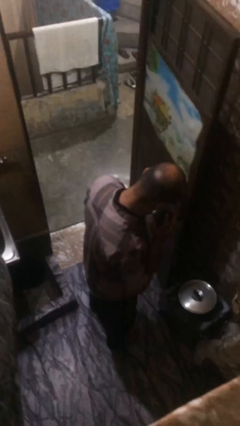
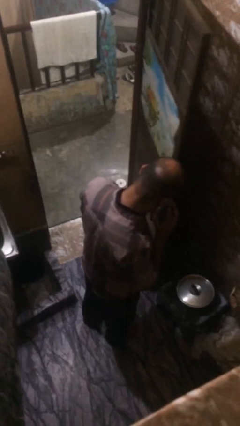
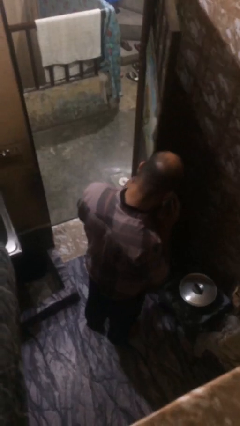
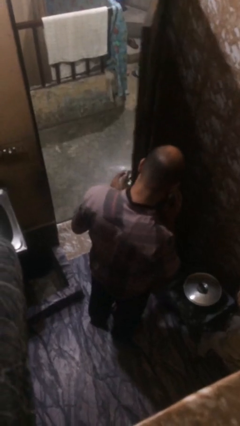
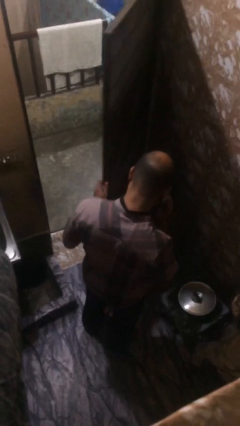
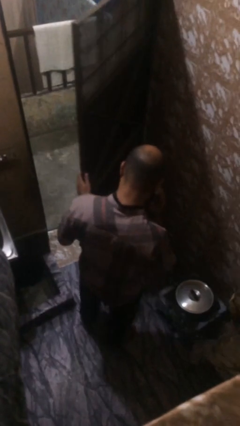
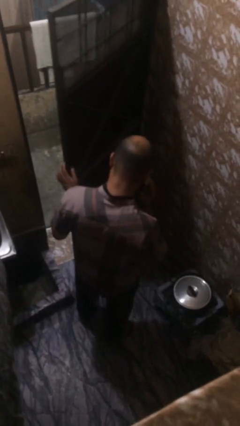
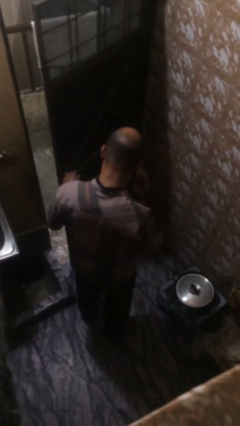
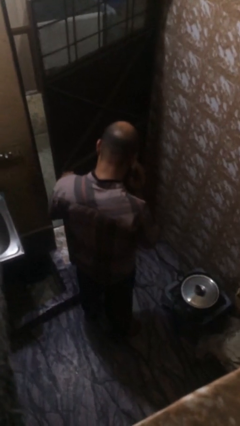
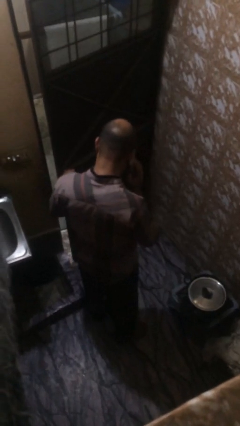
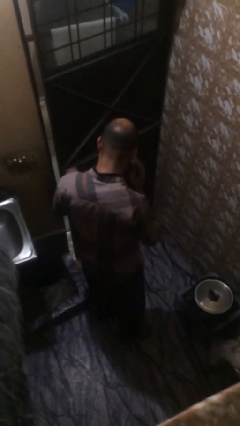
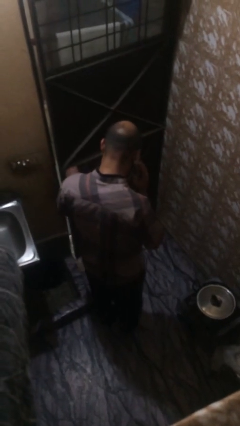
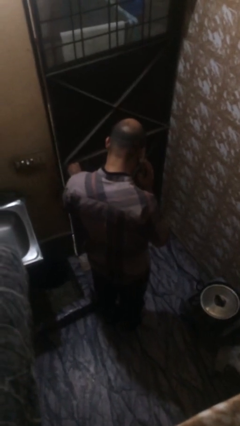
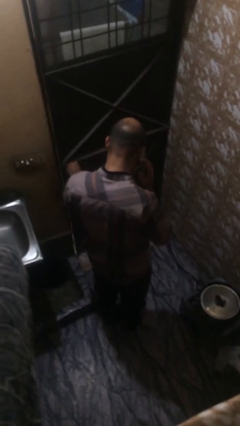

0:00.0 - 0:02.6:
person closes facility door

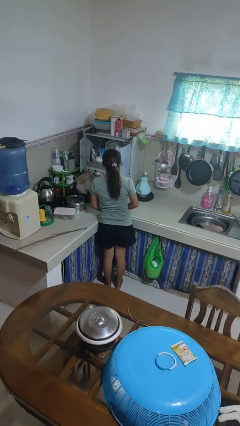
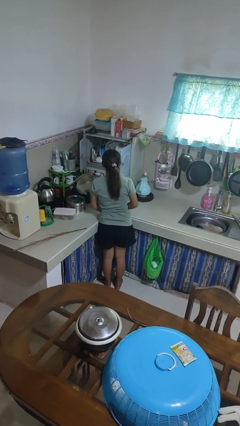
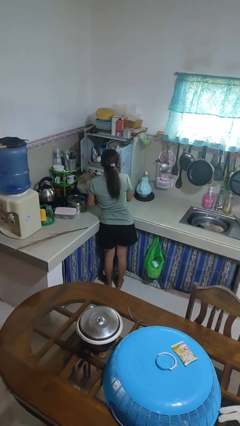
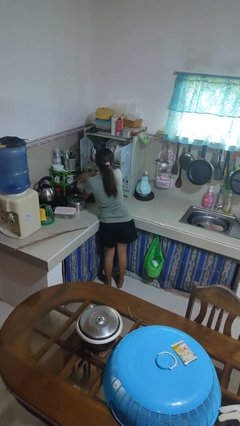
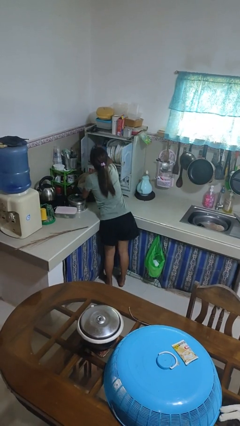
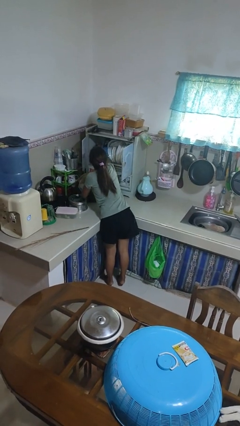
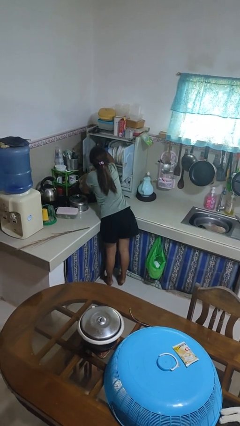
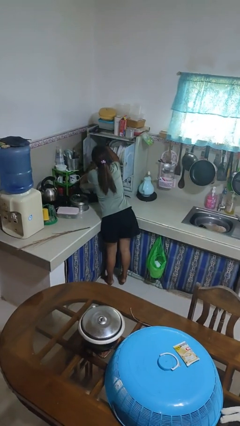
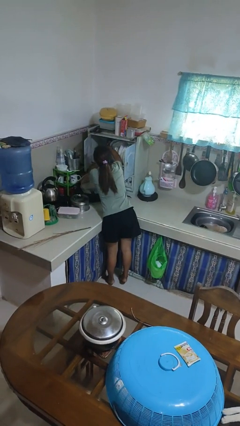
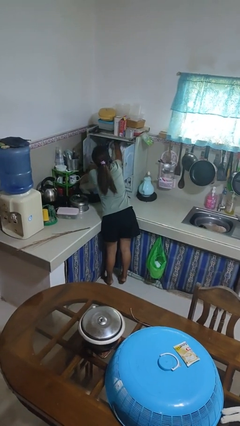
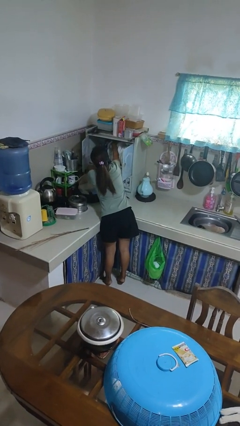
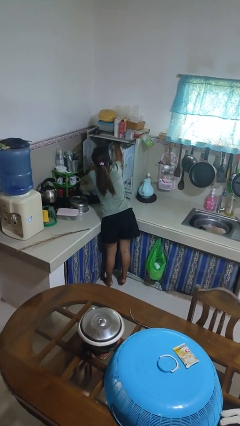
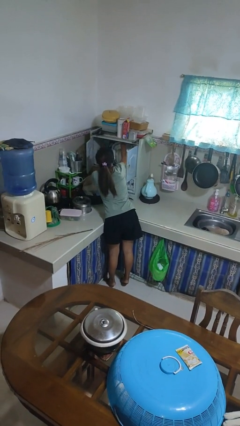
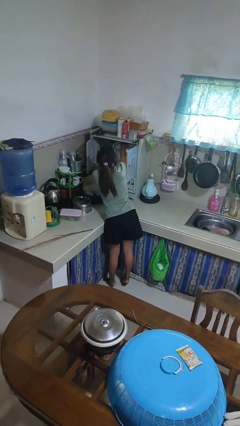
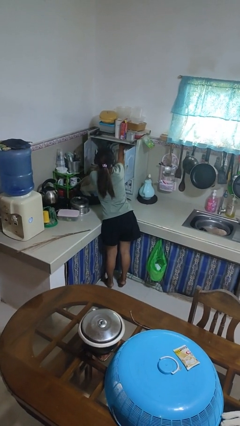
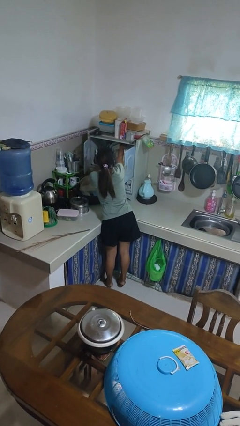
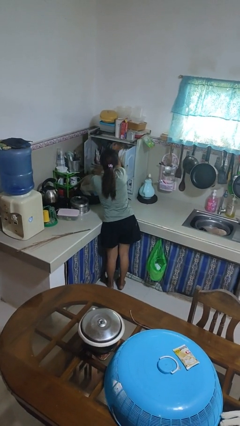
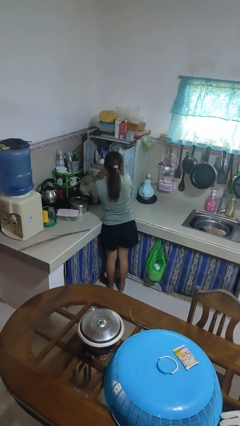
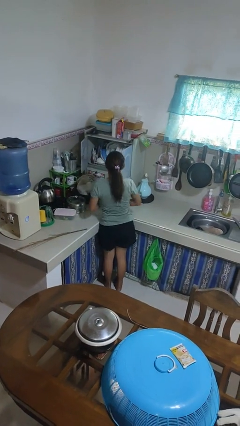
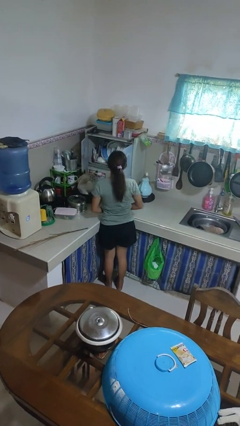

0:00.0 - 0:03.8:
person searches in kitchen drawer

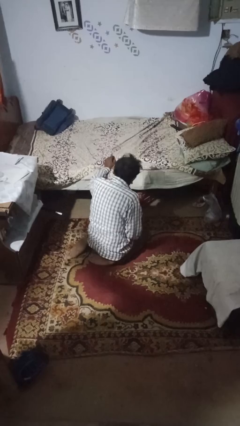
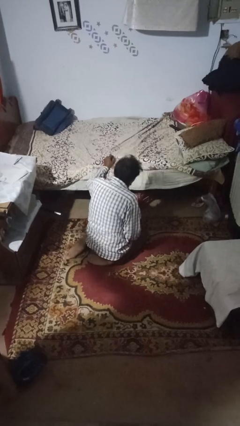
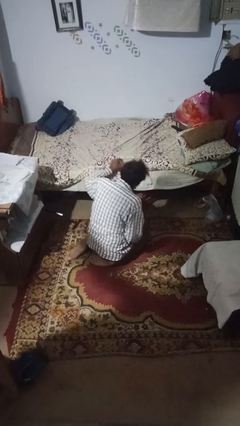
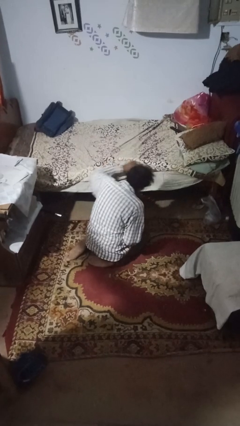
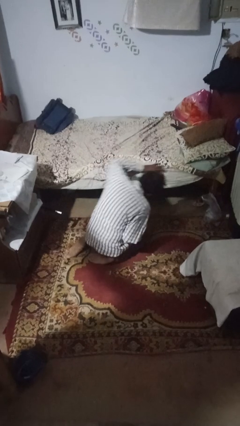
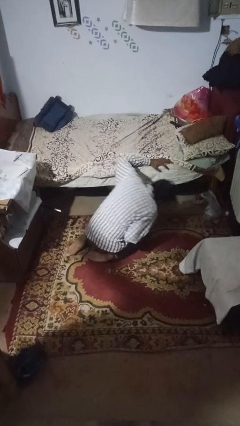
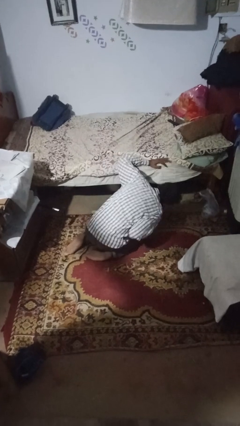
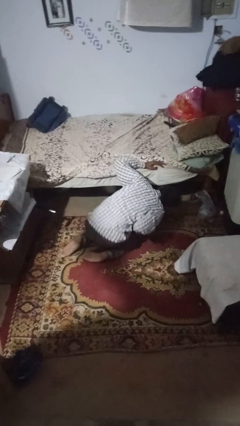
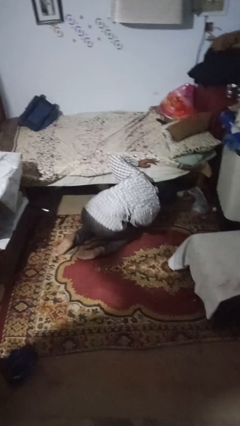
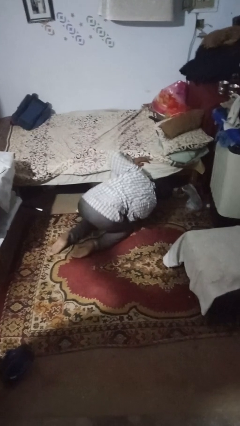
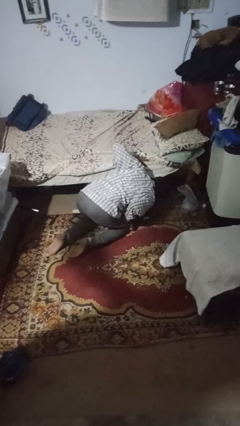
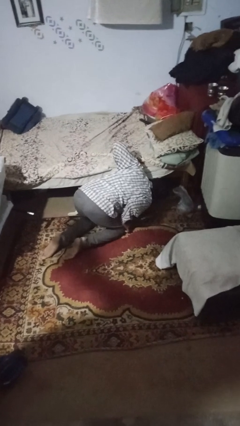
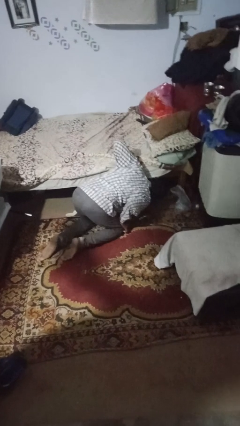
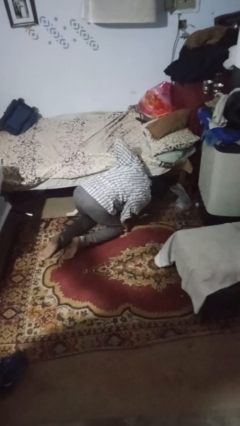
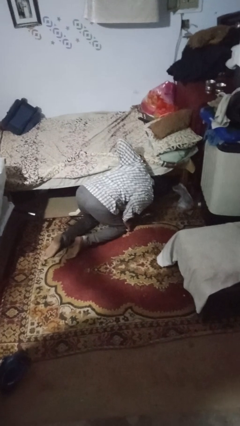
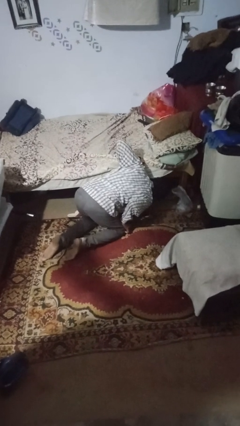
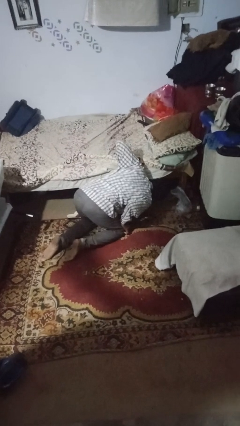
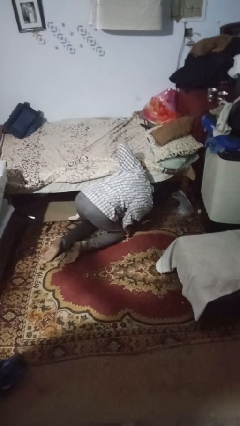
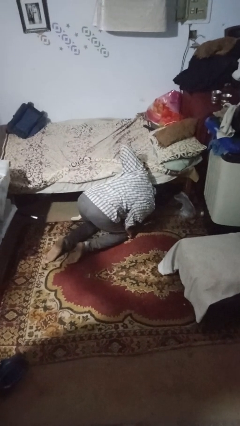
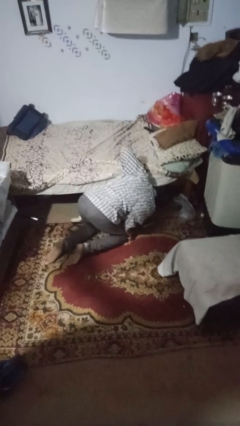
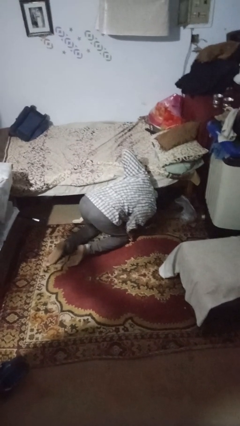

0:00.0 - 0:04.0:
person searches under bed

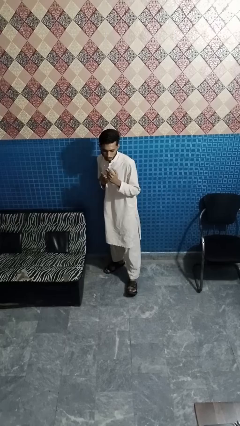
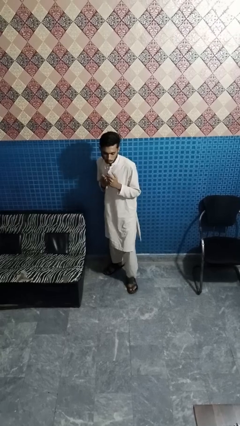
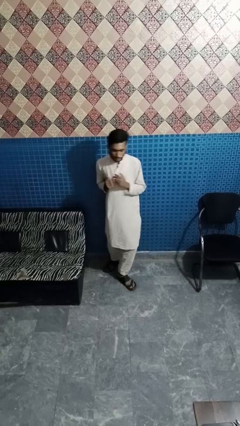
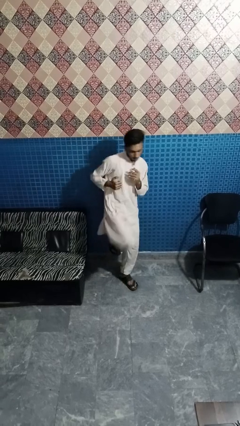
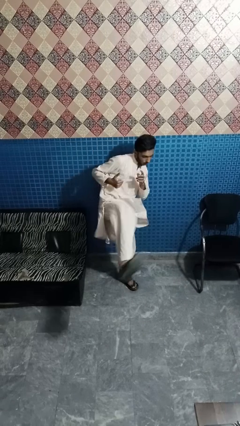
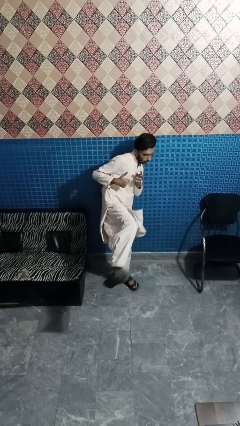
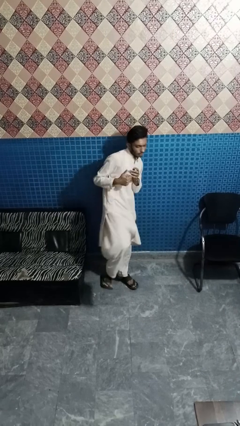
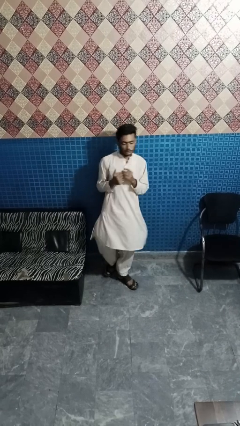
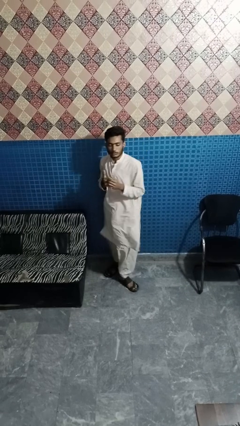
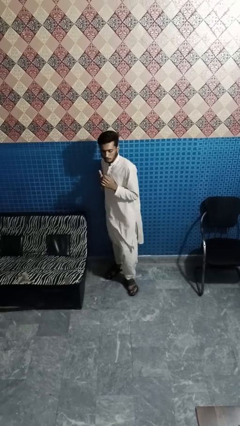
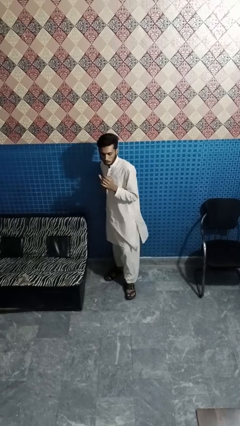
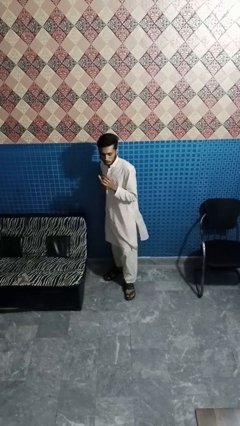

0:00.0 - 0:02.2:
person karate kicks

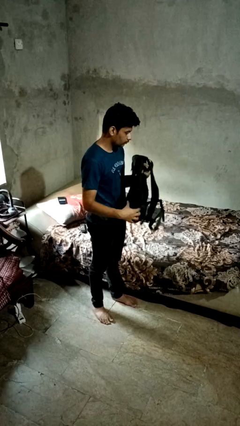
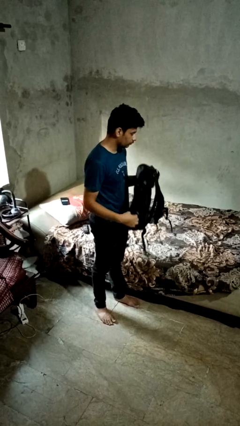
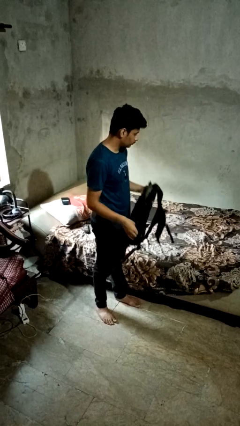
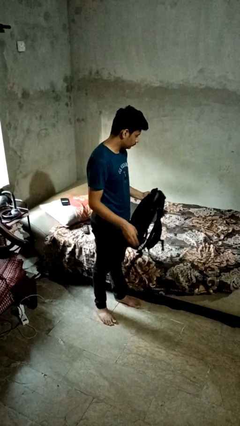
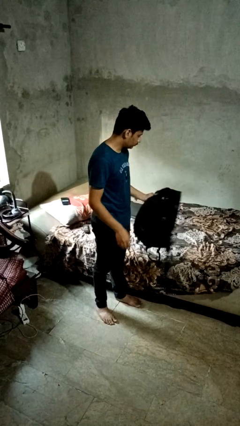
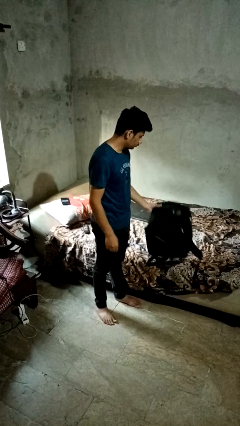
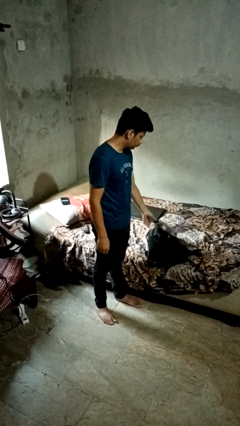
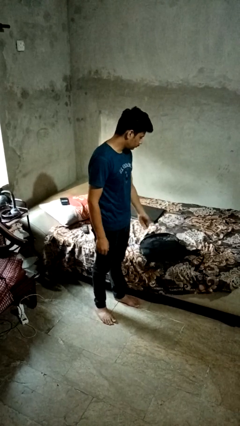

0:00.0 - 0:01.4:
person puts down object on bed

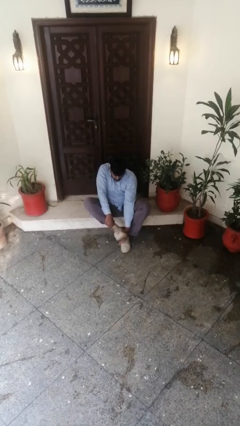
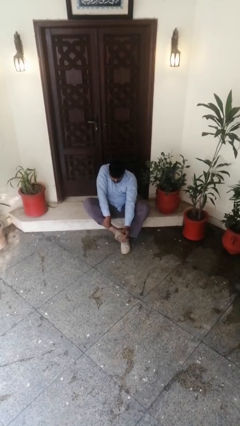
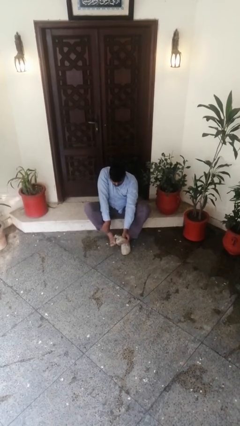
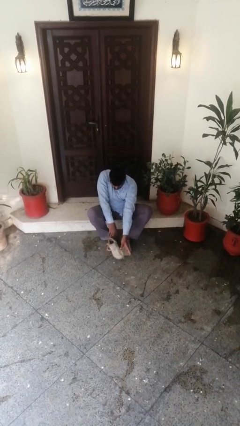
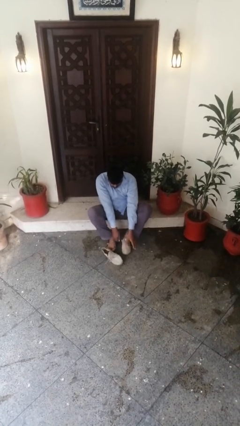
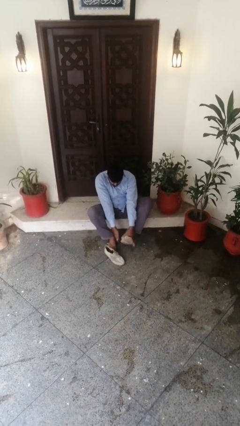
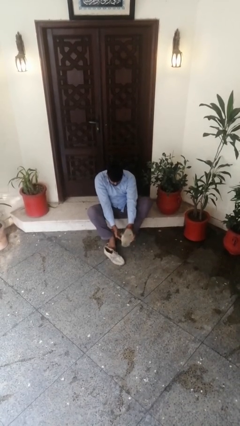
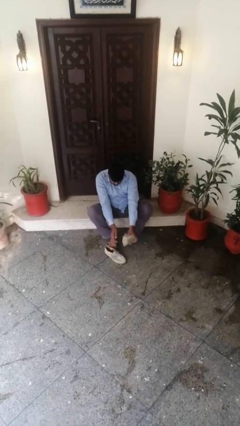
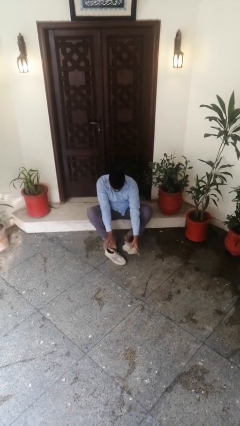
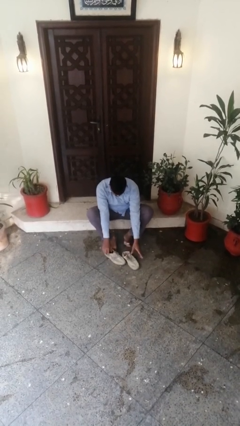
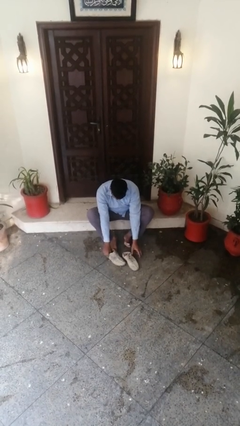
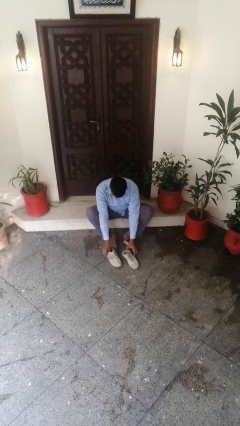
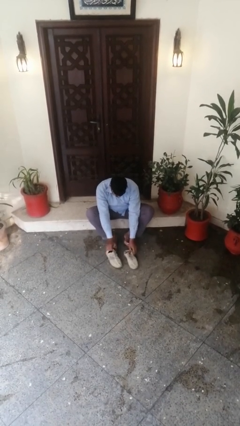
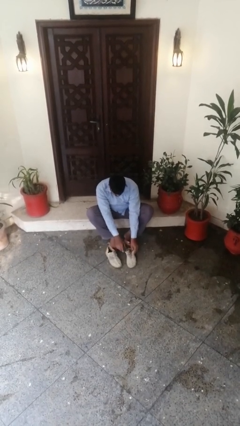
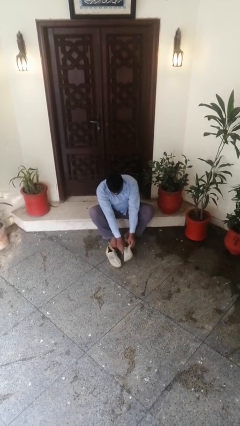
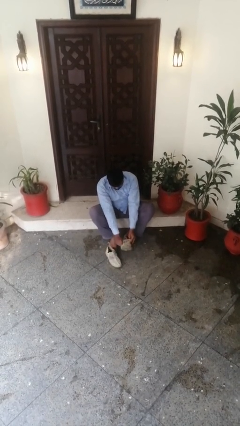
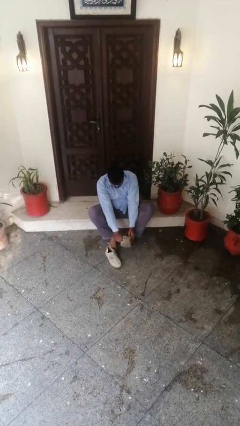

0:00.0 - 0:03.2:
person takes off shoes

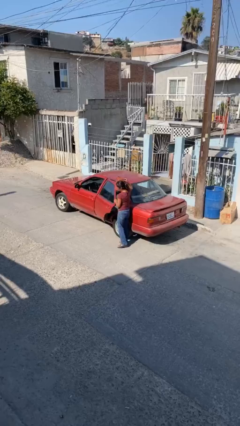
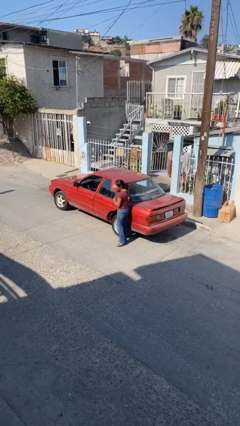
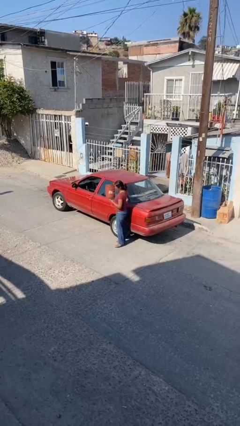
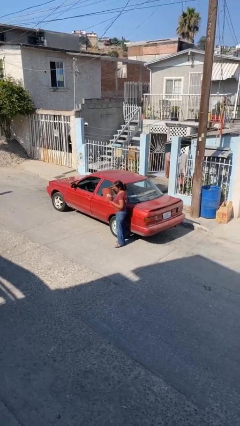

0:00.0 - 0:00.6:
person closes car door
